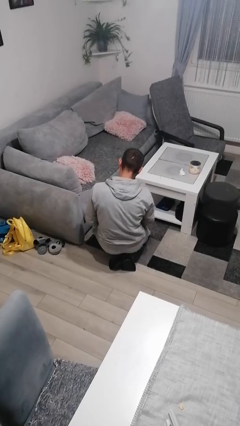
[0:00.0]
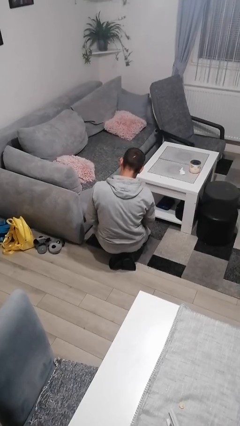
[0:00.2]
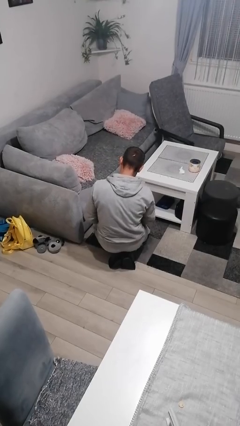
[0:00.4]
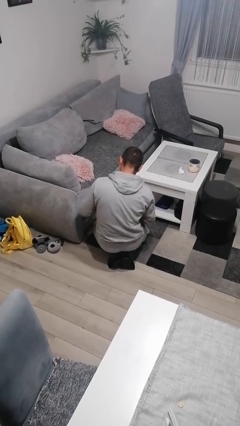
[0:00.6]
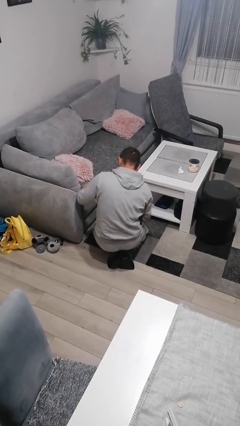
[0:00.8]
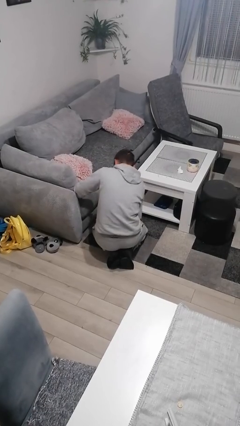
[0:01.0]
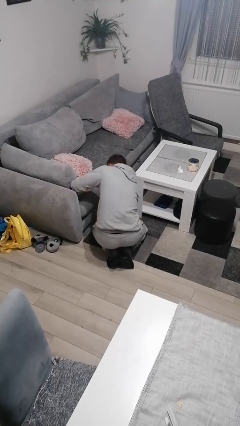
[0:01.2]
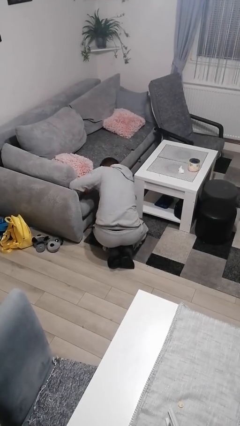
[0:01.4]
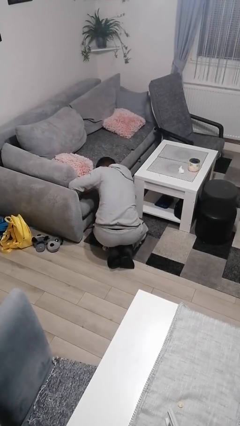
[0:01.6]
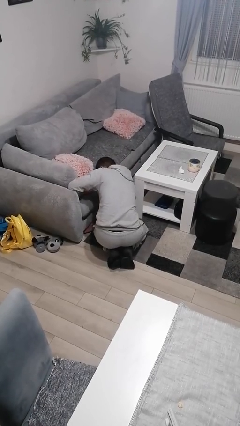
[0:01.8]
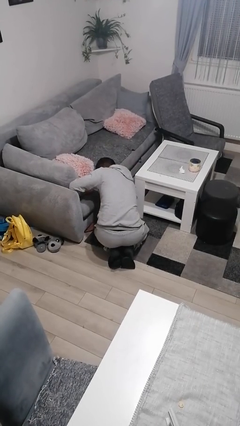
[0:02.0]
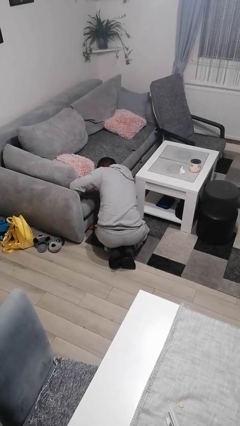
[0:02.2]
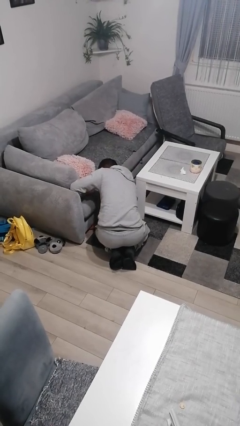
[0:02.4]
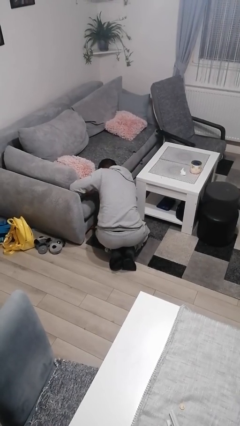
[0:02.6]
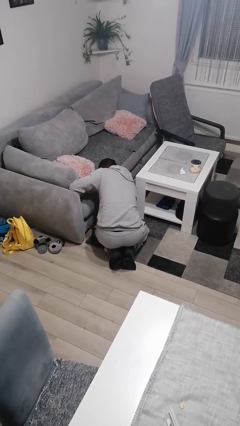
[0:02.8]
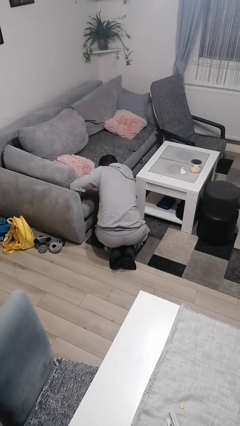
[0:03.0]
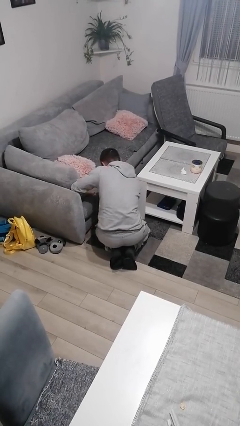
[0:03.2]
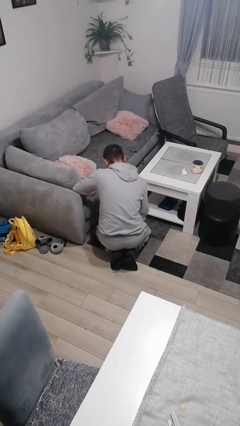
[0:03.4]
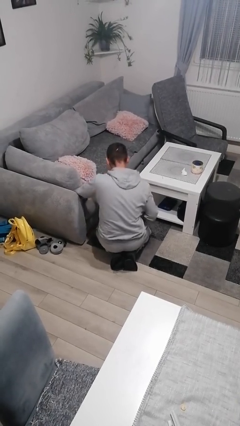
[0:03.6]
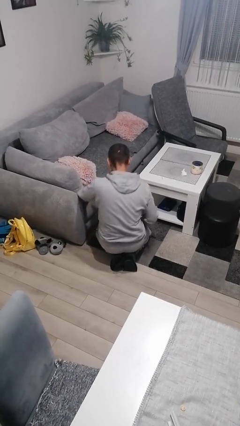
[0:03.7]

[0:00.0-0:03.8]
person searches under couch

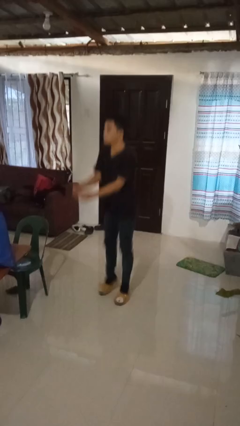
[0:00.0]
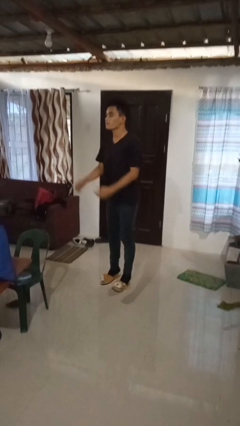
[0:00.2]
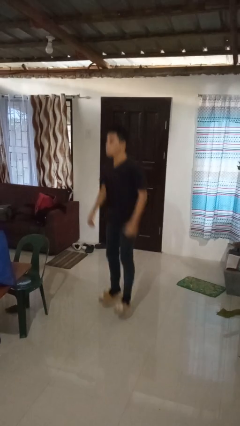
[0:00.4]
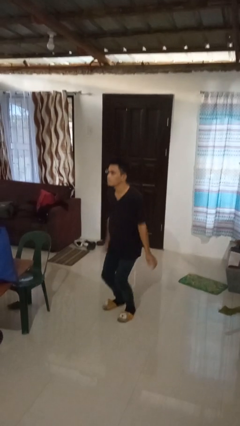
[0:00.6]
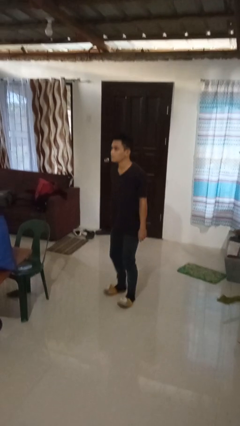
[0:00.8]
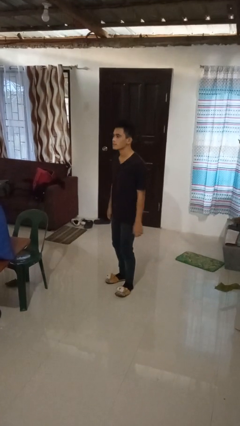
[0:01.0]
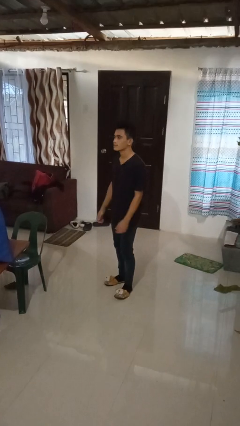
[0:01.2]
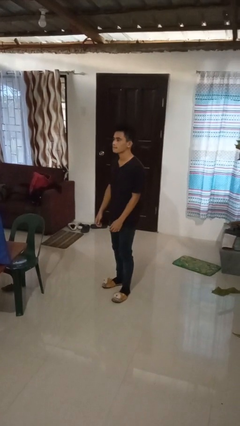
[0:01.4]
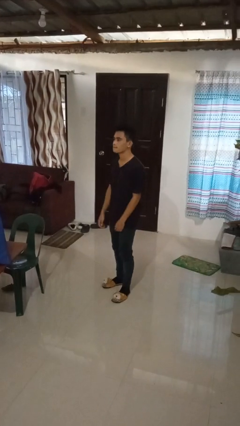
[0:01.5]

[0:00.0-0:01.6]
person jumps

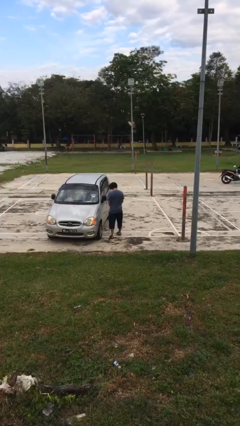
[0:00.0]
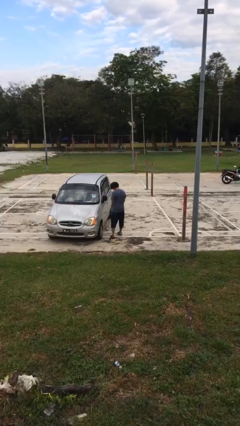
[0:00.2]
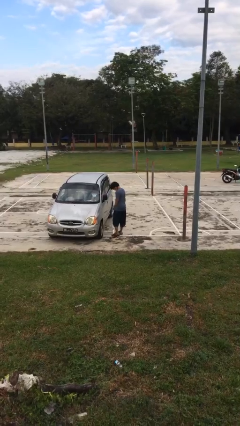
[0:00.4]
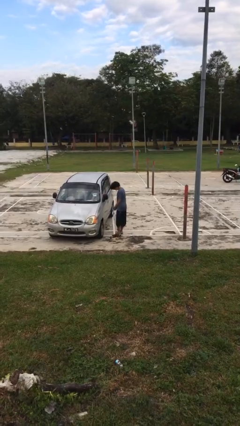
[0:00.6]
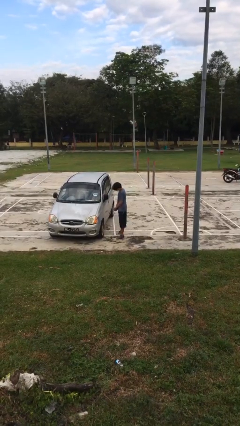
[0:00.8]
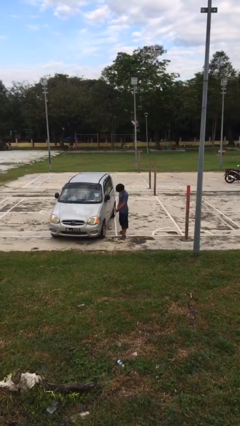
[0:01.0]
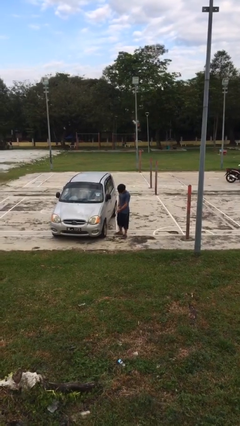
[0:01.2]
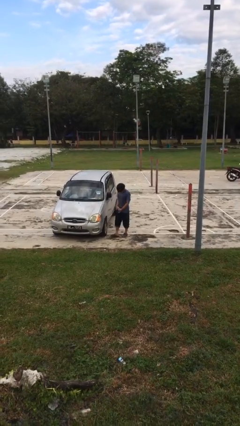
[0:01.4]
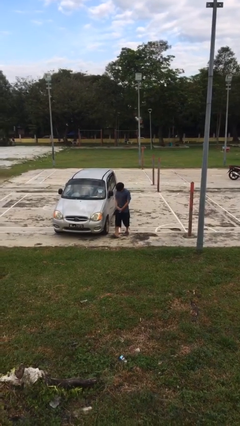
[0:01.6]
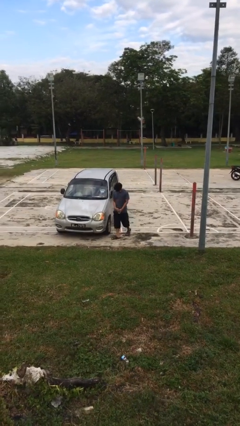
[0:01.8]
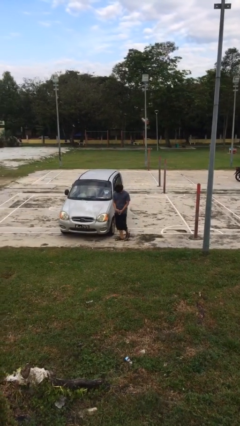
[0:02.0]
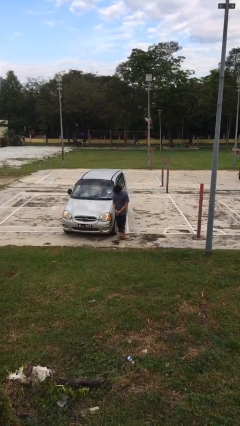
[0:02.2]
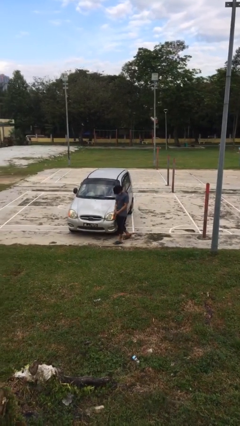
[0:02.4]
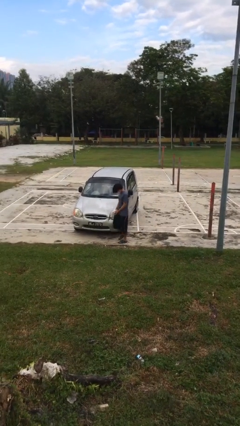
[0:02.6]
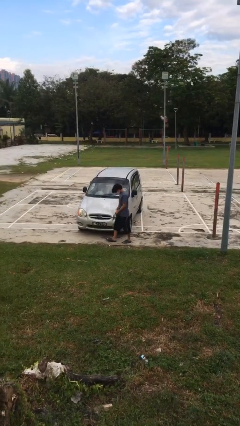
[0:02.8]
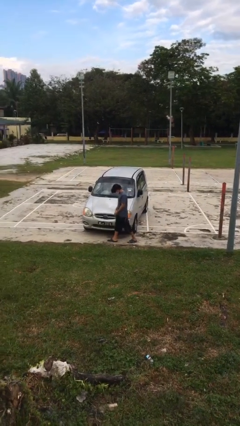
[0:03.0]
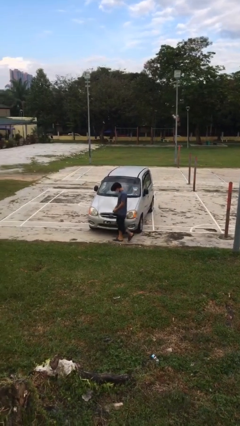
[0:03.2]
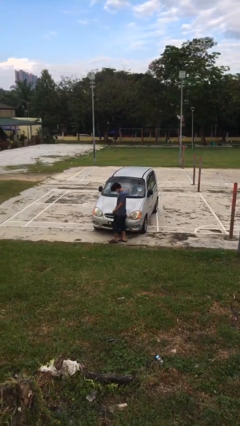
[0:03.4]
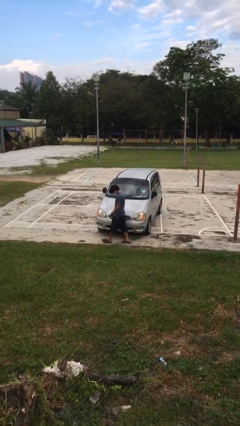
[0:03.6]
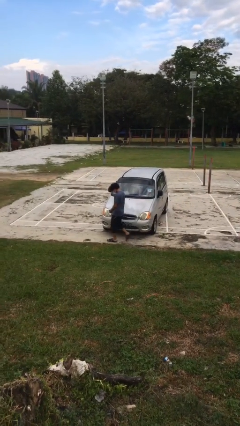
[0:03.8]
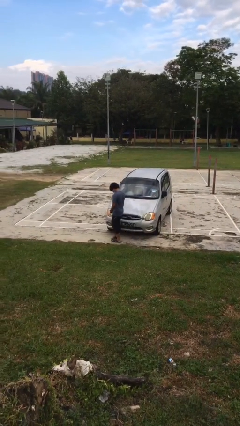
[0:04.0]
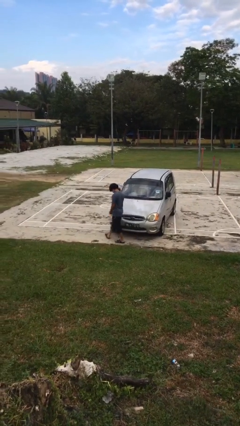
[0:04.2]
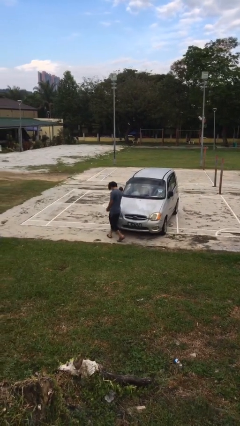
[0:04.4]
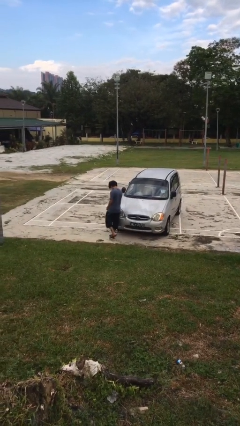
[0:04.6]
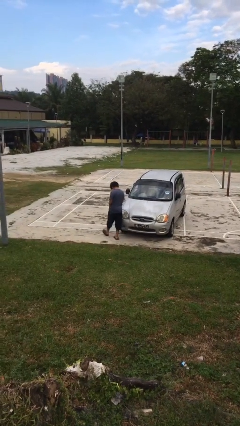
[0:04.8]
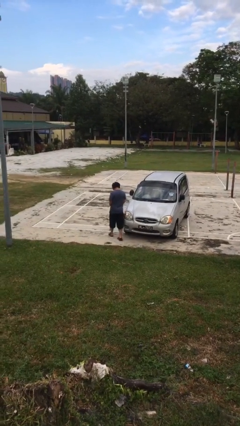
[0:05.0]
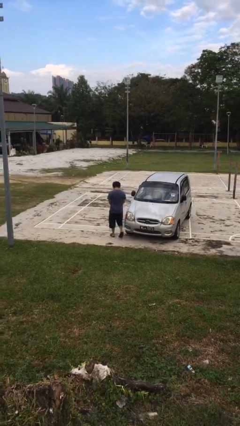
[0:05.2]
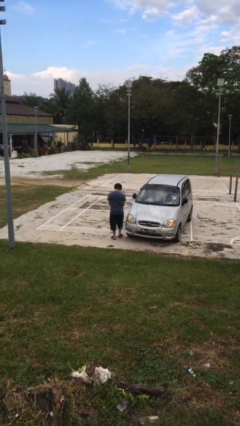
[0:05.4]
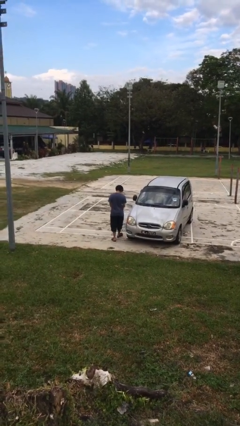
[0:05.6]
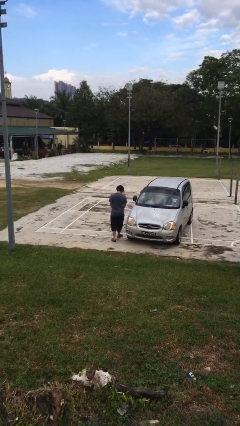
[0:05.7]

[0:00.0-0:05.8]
person walks around car

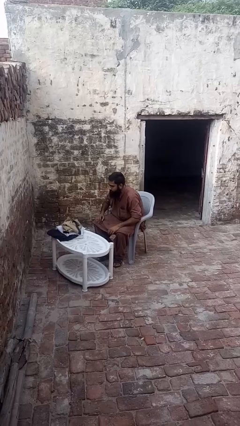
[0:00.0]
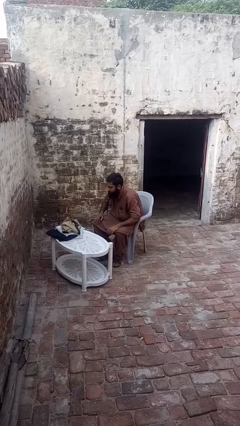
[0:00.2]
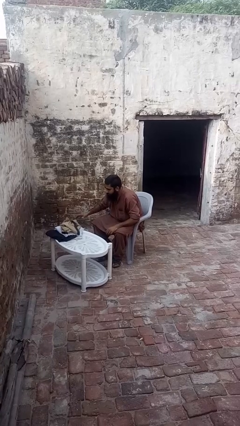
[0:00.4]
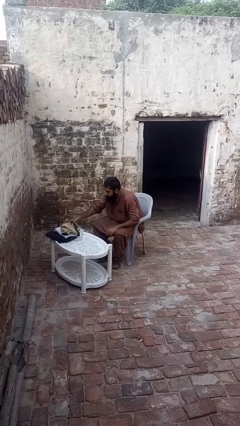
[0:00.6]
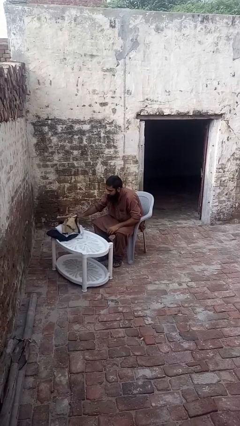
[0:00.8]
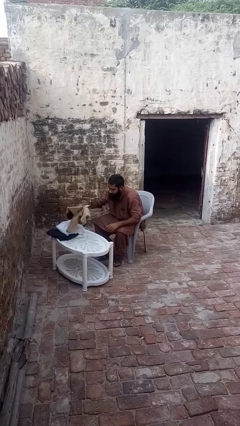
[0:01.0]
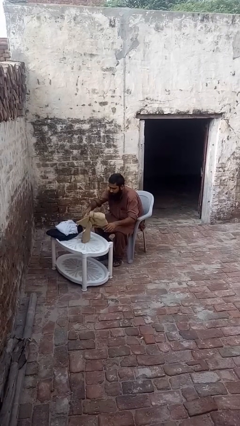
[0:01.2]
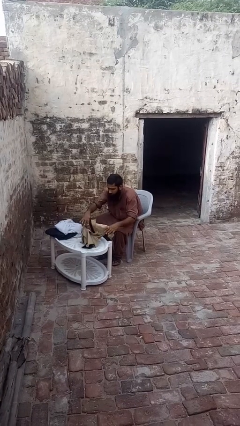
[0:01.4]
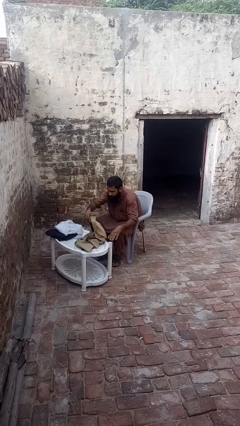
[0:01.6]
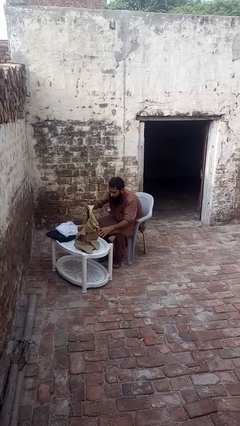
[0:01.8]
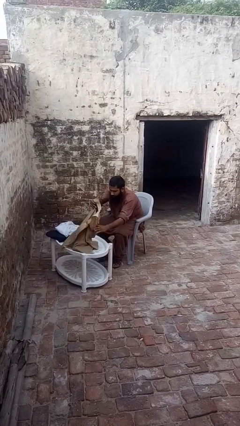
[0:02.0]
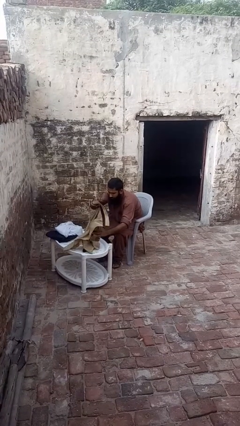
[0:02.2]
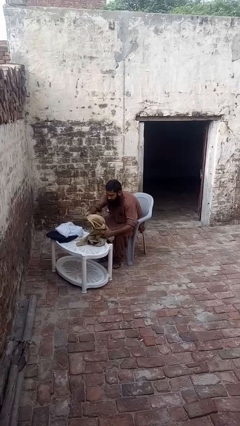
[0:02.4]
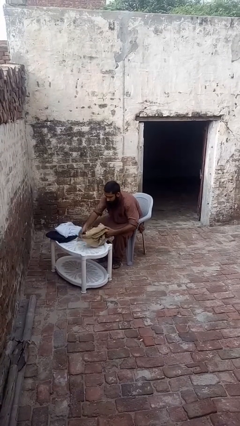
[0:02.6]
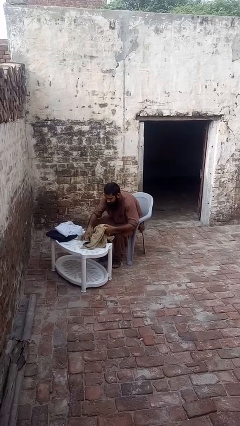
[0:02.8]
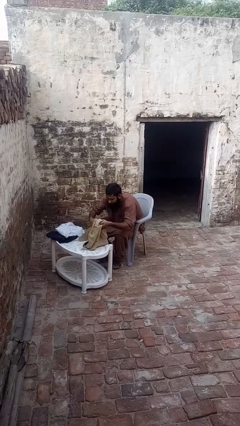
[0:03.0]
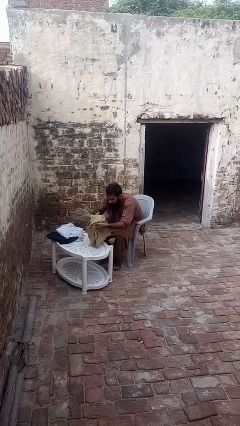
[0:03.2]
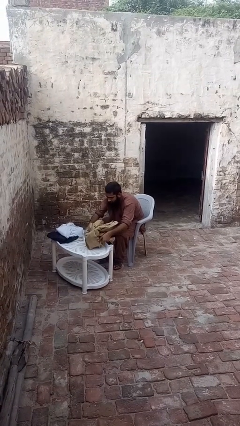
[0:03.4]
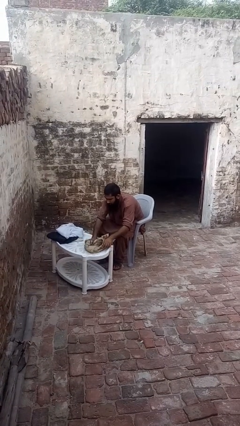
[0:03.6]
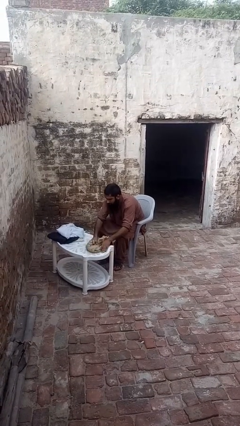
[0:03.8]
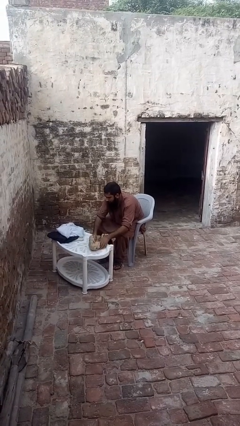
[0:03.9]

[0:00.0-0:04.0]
person folds shirt

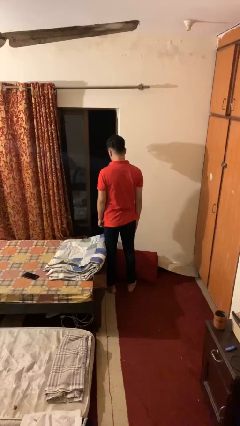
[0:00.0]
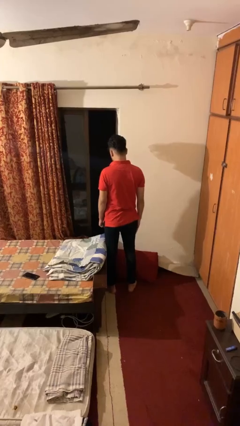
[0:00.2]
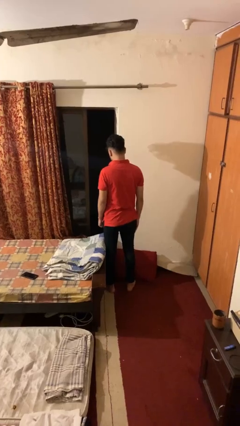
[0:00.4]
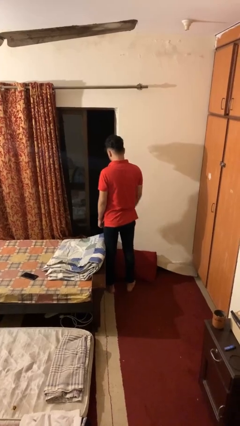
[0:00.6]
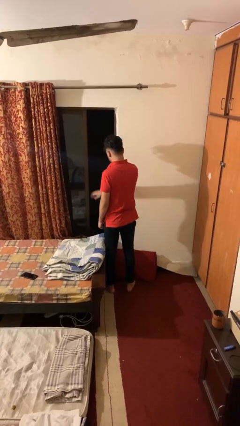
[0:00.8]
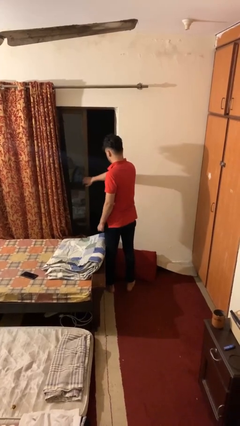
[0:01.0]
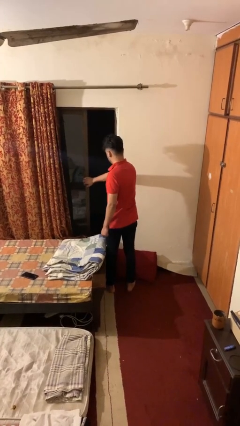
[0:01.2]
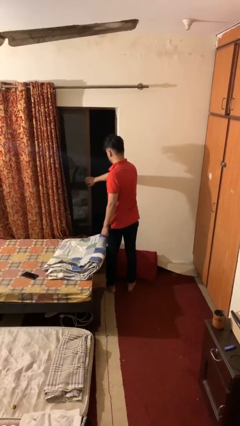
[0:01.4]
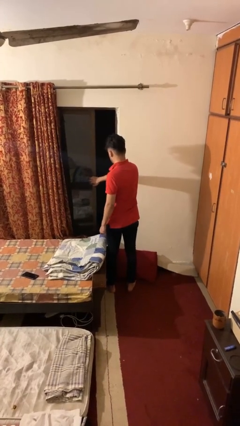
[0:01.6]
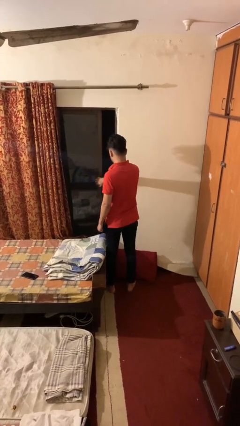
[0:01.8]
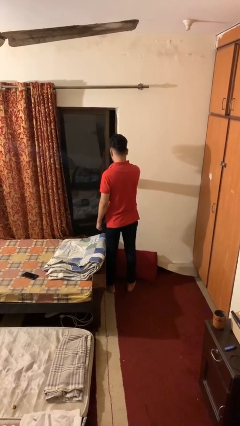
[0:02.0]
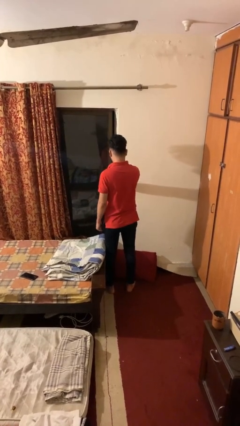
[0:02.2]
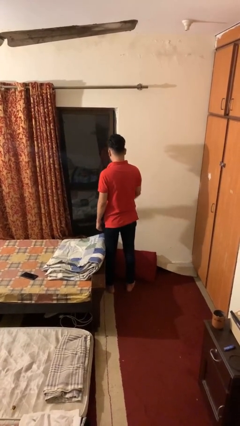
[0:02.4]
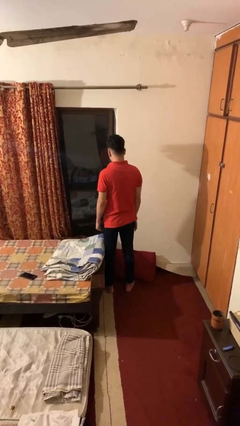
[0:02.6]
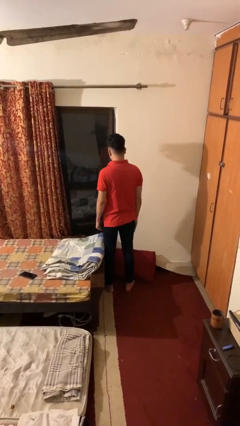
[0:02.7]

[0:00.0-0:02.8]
person closes home window
